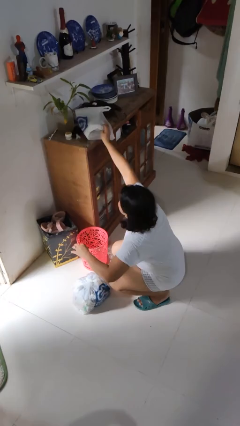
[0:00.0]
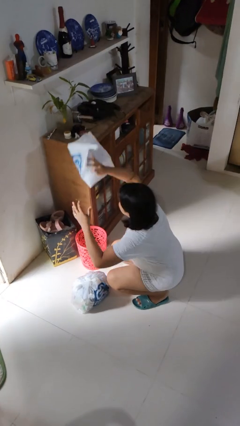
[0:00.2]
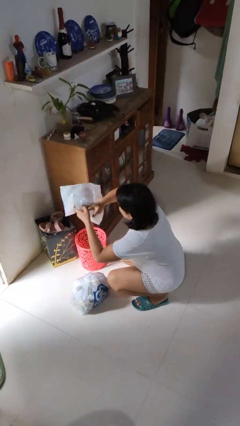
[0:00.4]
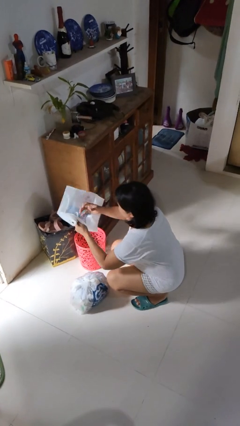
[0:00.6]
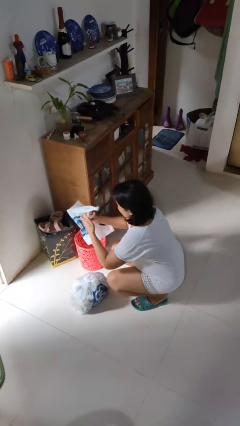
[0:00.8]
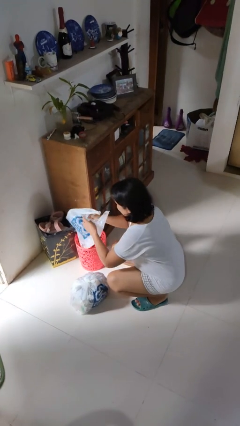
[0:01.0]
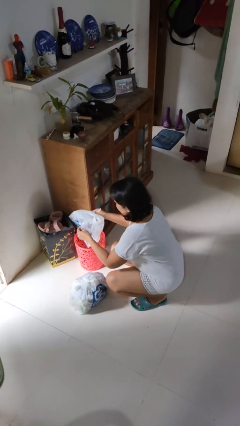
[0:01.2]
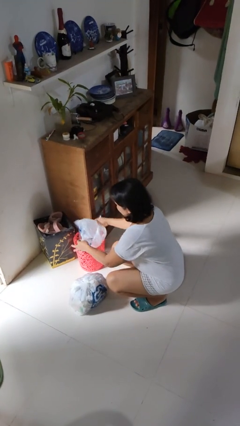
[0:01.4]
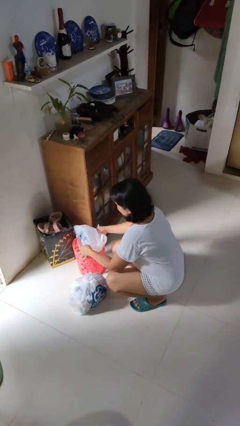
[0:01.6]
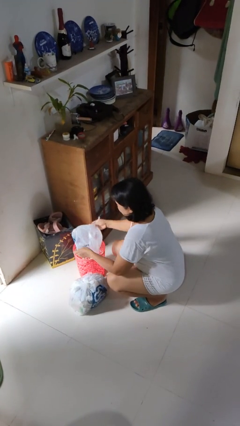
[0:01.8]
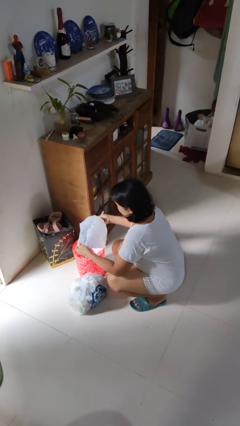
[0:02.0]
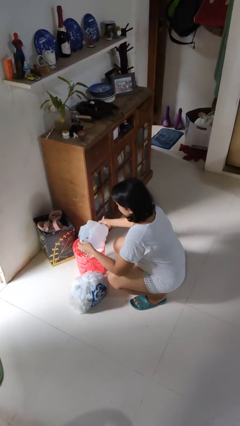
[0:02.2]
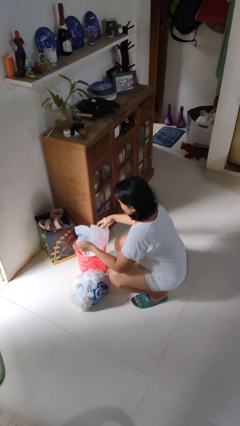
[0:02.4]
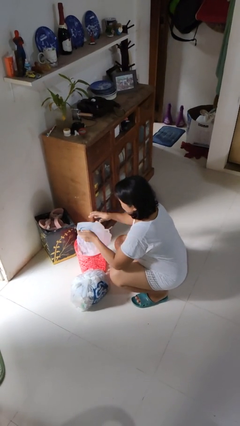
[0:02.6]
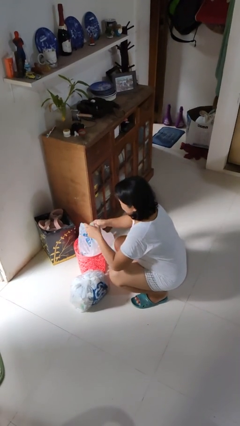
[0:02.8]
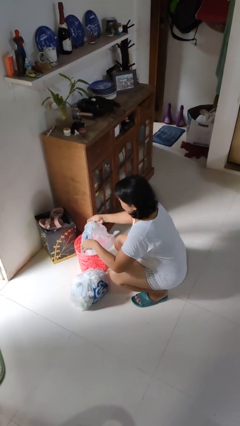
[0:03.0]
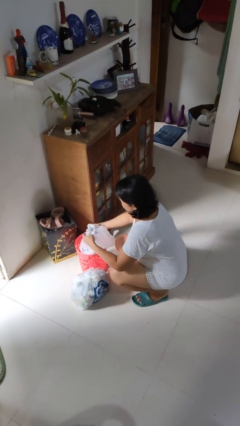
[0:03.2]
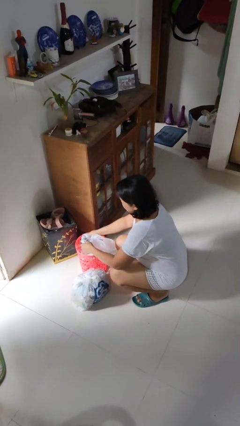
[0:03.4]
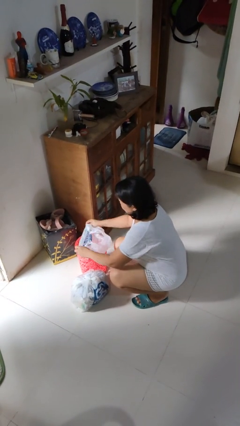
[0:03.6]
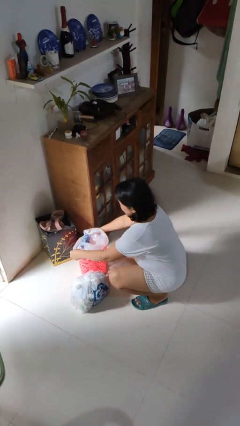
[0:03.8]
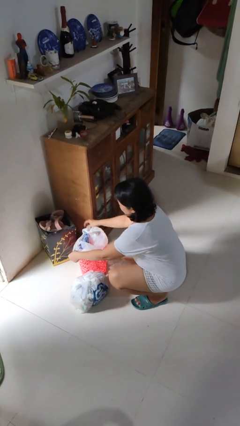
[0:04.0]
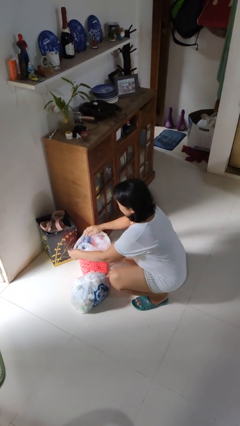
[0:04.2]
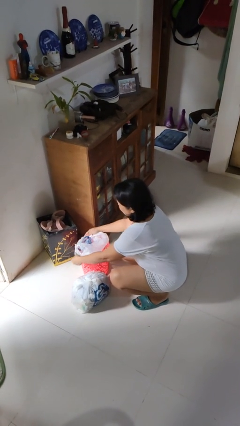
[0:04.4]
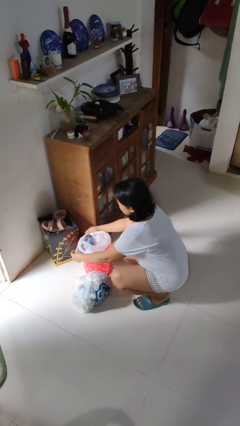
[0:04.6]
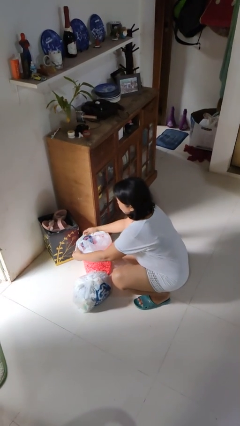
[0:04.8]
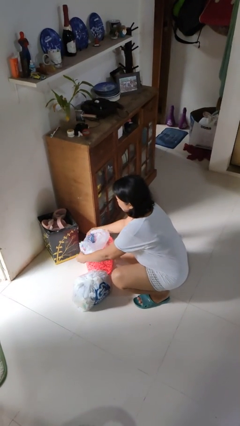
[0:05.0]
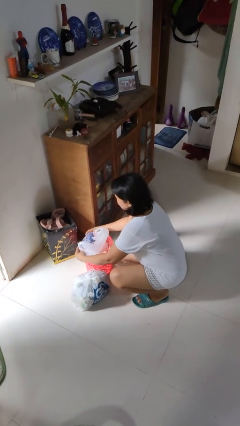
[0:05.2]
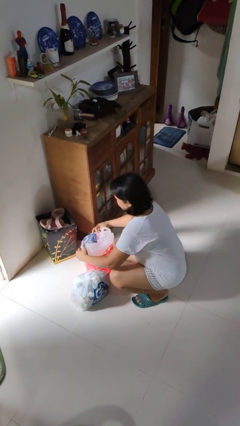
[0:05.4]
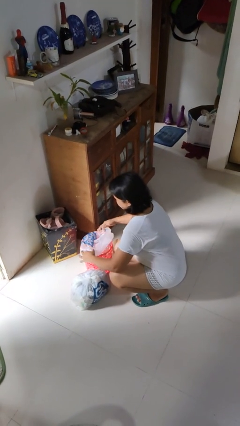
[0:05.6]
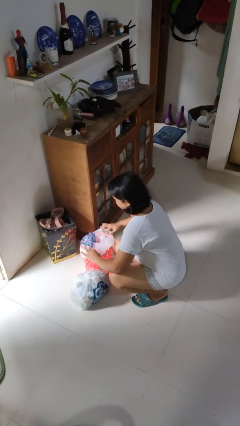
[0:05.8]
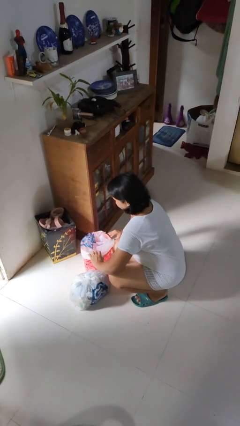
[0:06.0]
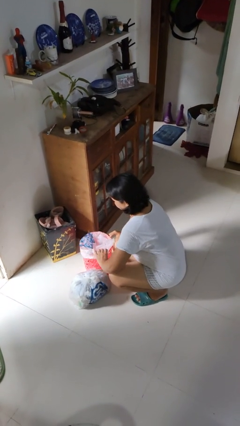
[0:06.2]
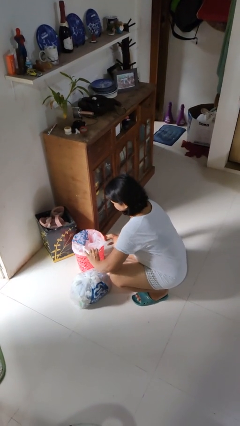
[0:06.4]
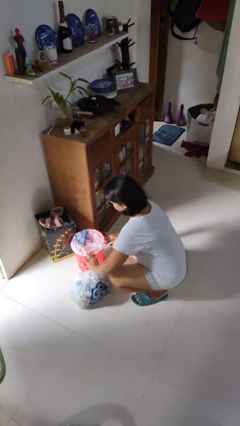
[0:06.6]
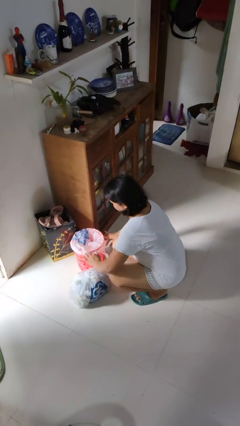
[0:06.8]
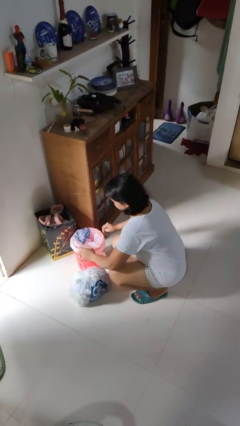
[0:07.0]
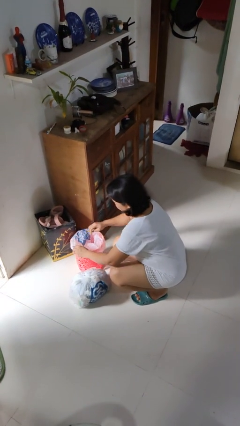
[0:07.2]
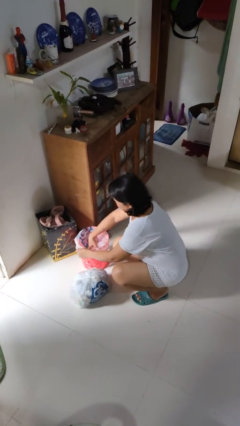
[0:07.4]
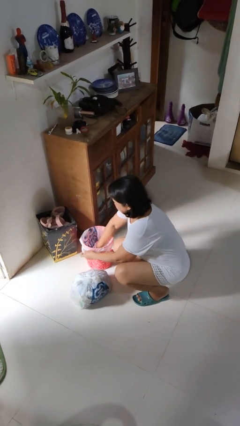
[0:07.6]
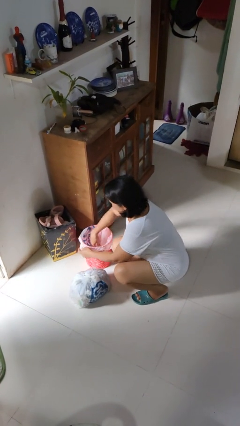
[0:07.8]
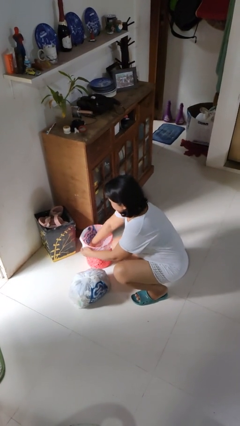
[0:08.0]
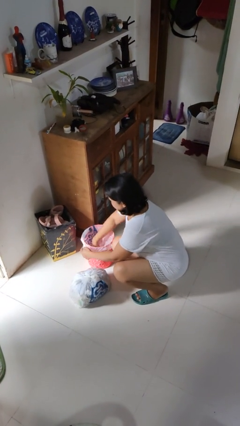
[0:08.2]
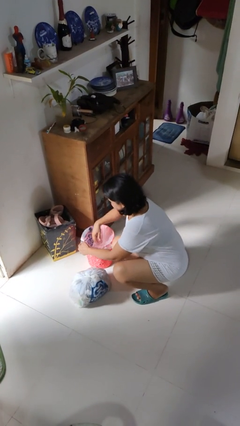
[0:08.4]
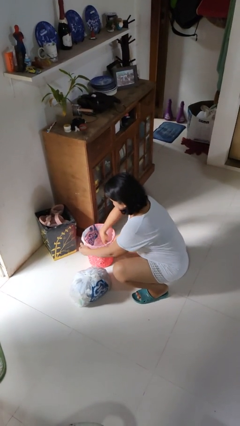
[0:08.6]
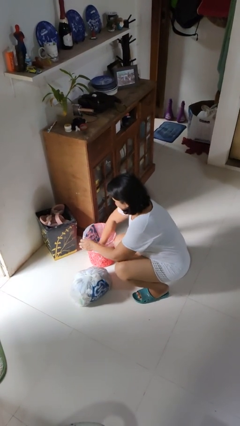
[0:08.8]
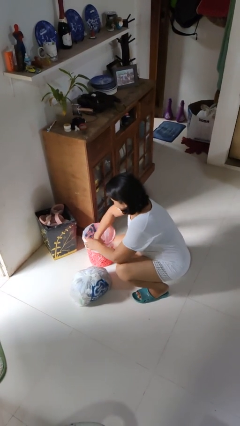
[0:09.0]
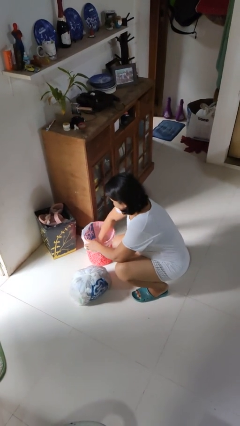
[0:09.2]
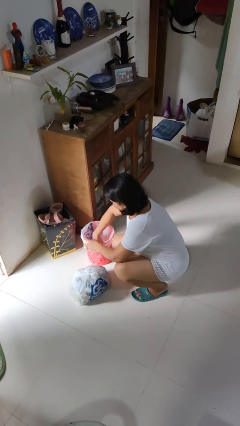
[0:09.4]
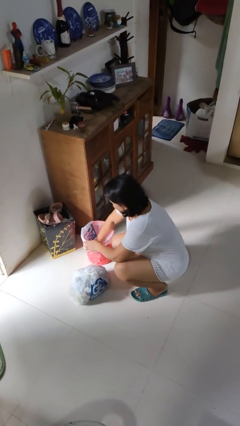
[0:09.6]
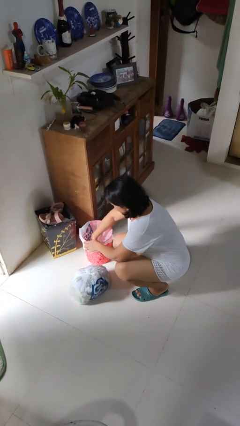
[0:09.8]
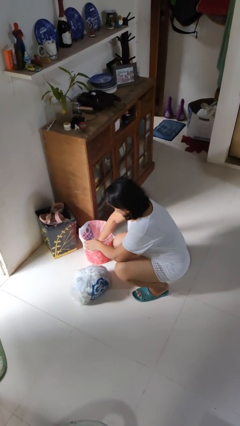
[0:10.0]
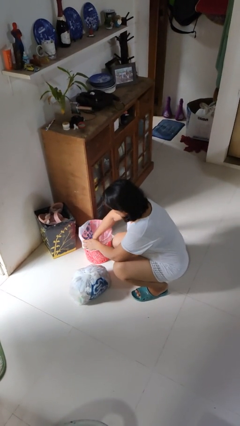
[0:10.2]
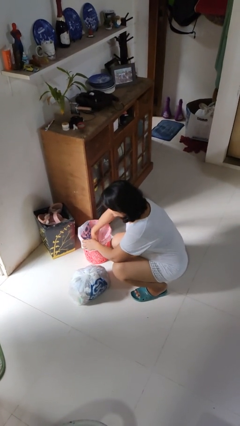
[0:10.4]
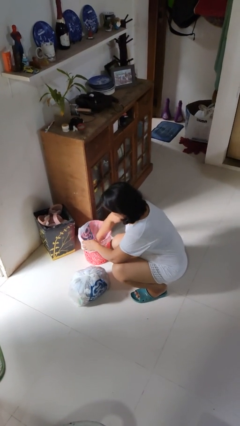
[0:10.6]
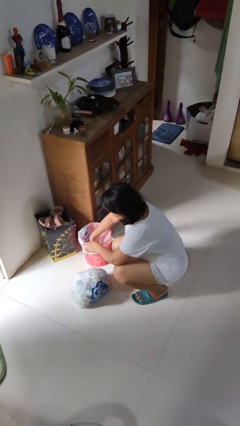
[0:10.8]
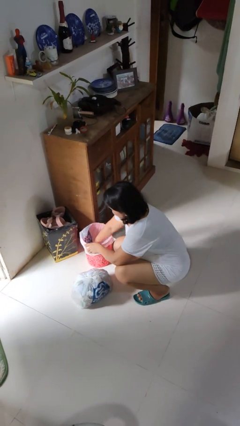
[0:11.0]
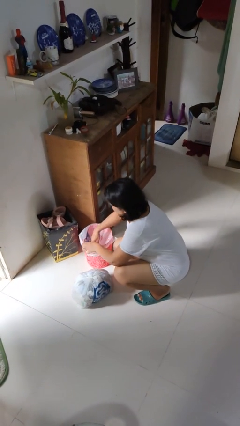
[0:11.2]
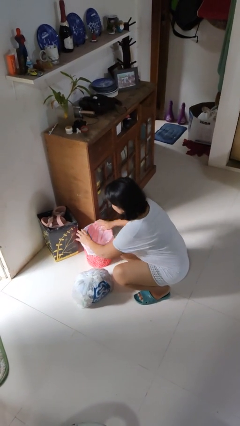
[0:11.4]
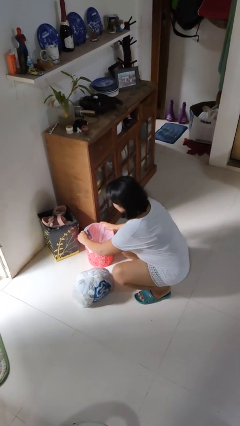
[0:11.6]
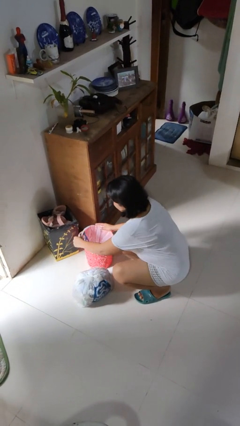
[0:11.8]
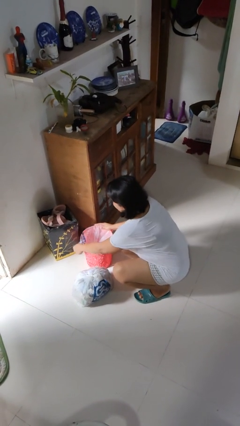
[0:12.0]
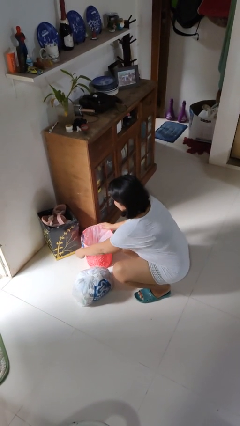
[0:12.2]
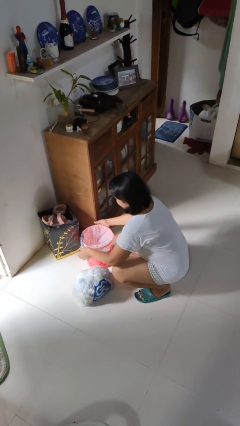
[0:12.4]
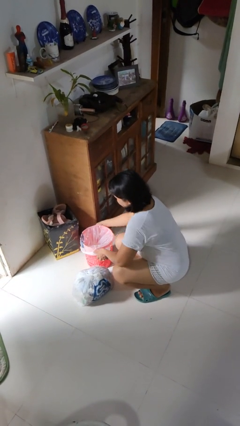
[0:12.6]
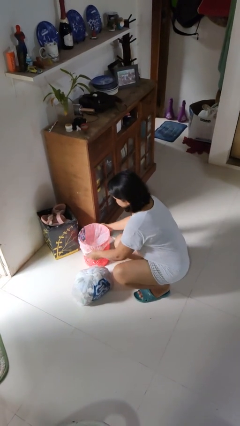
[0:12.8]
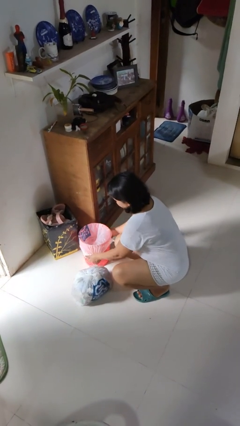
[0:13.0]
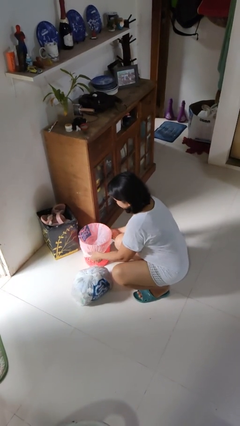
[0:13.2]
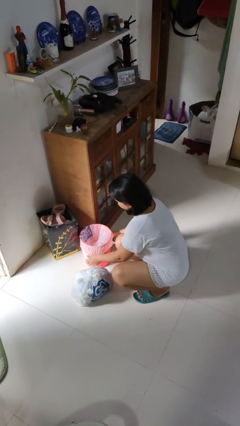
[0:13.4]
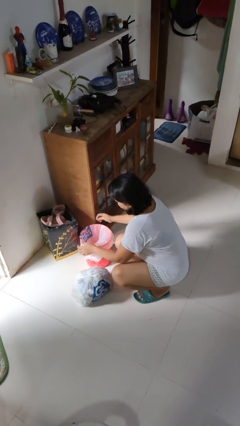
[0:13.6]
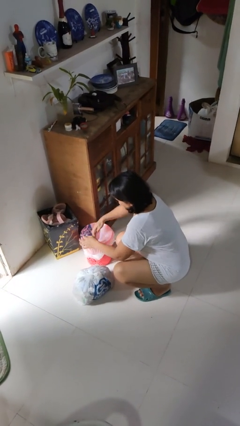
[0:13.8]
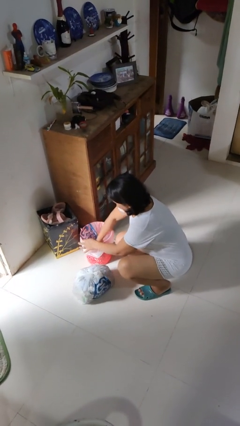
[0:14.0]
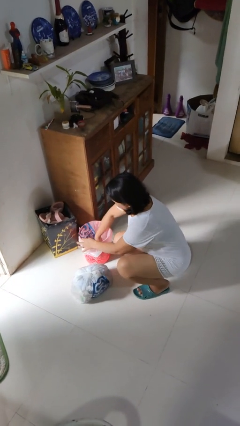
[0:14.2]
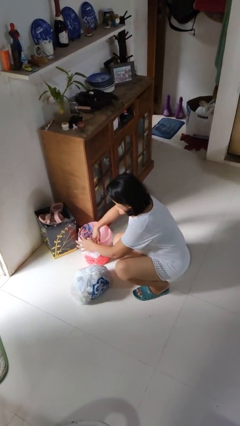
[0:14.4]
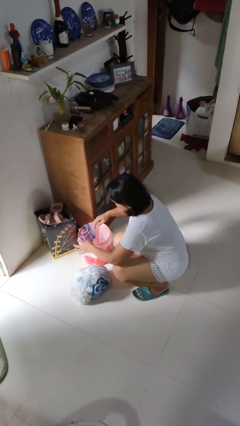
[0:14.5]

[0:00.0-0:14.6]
person inserts trashbag into trashcan

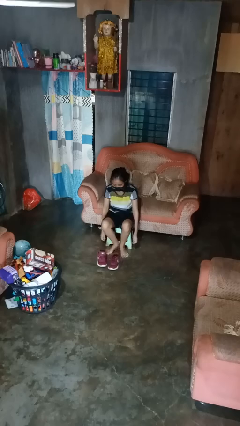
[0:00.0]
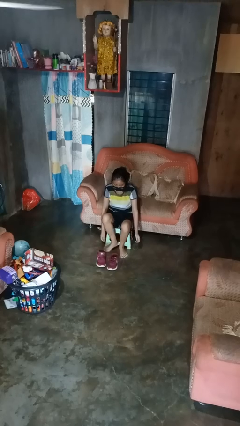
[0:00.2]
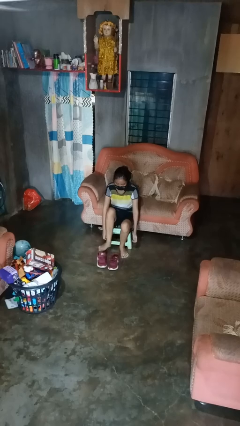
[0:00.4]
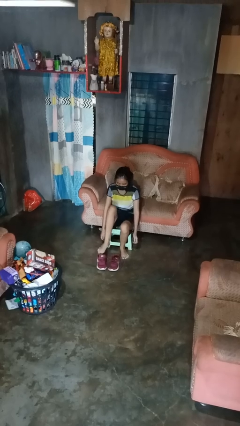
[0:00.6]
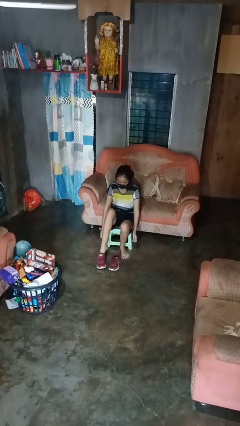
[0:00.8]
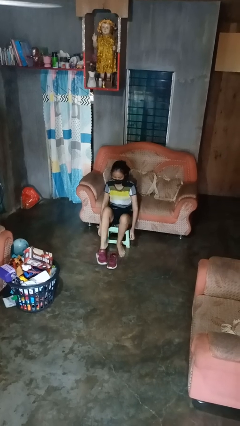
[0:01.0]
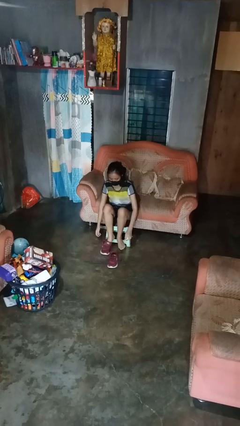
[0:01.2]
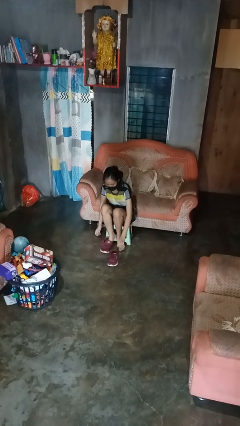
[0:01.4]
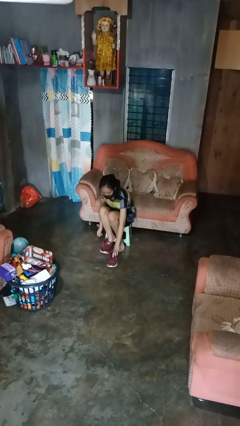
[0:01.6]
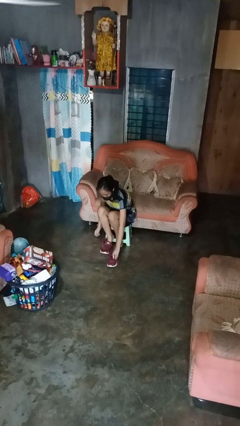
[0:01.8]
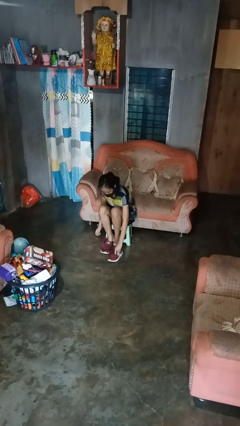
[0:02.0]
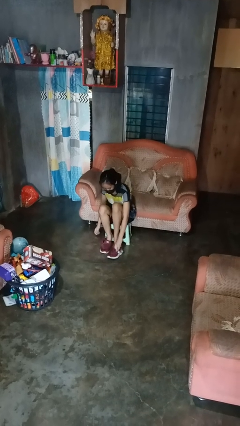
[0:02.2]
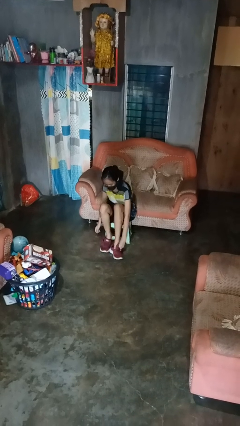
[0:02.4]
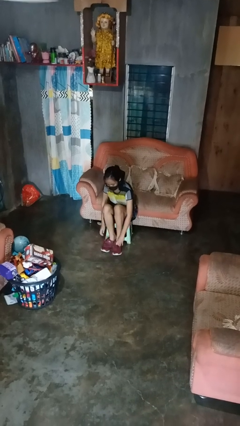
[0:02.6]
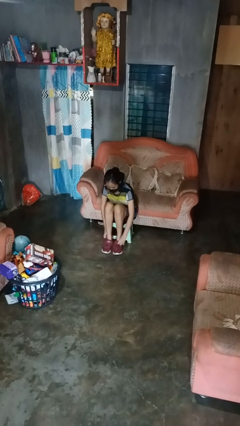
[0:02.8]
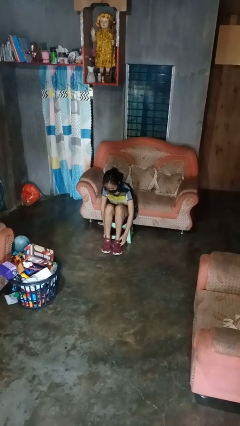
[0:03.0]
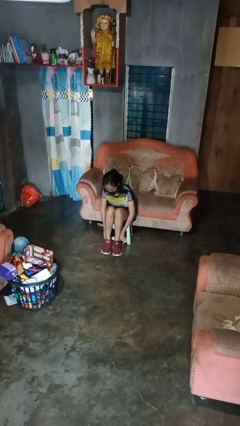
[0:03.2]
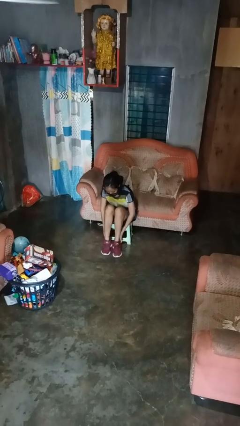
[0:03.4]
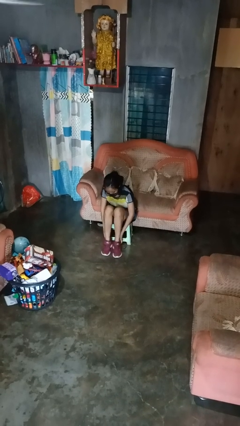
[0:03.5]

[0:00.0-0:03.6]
person puts on shoes
